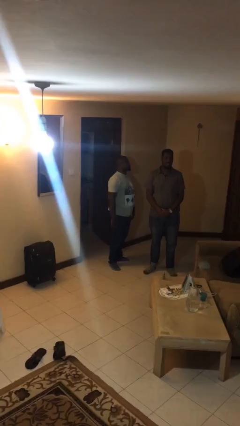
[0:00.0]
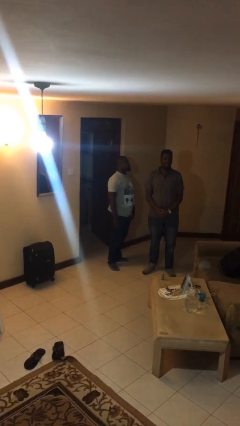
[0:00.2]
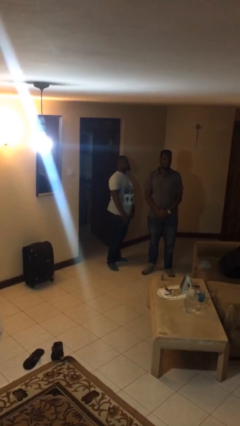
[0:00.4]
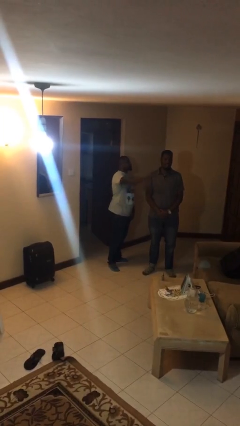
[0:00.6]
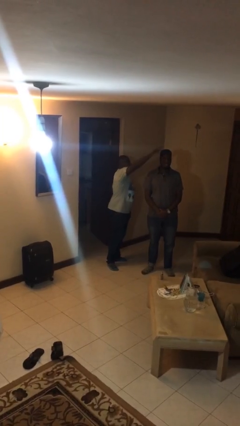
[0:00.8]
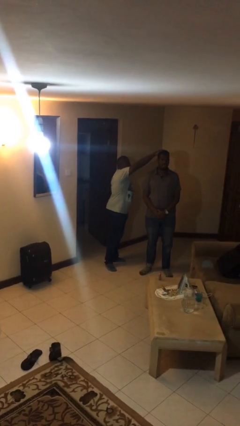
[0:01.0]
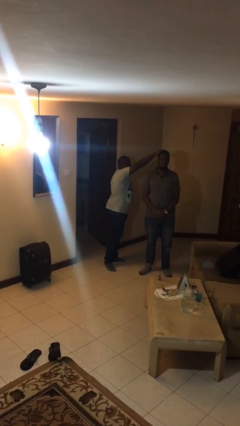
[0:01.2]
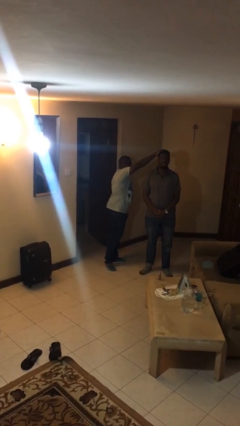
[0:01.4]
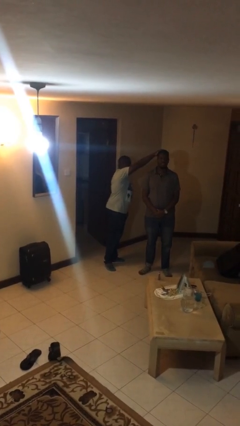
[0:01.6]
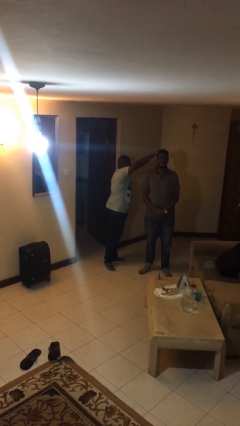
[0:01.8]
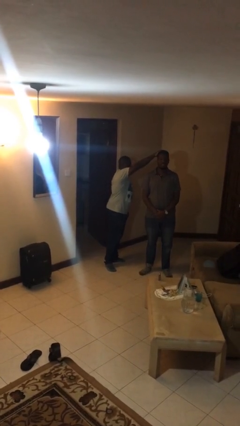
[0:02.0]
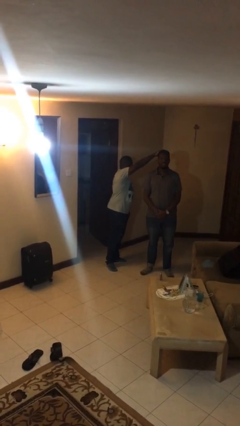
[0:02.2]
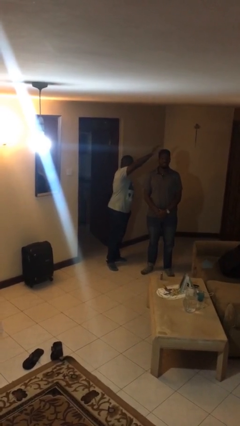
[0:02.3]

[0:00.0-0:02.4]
person grabs person by hair

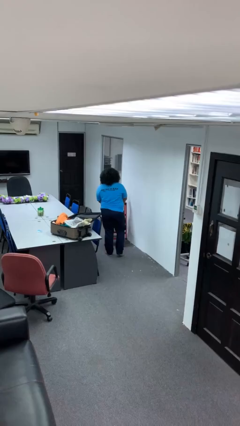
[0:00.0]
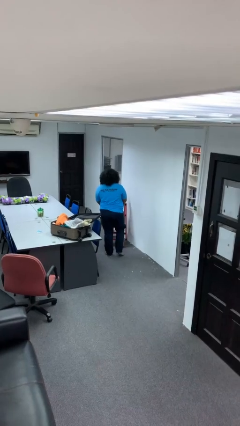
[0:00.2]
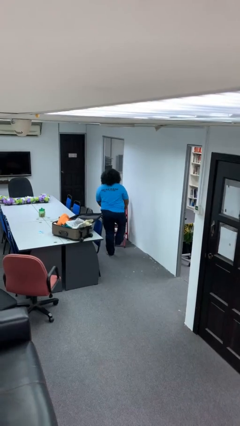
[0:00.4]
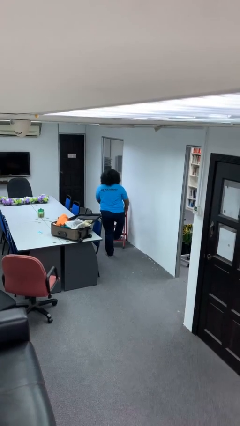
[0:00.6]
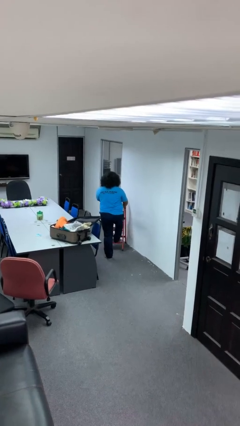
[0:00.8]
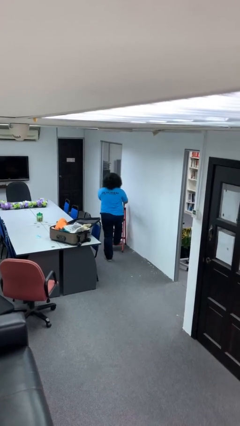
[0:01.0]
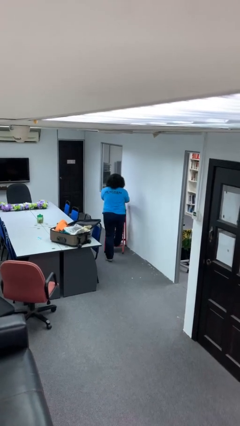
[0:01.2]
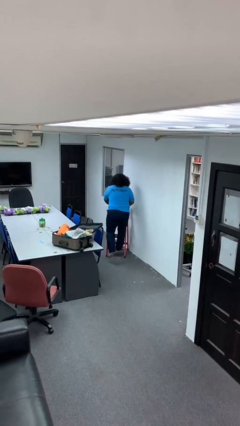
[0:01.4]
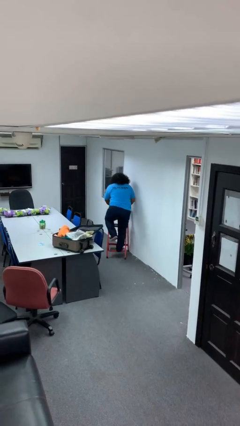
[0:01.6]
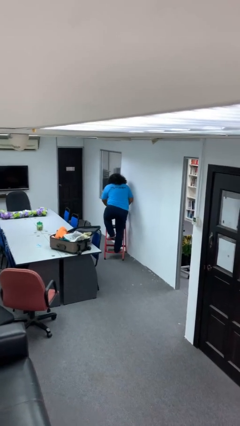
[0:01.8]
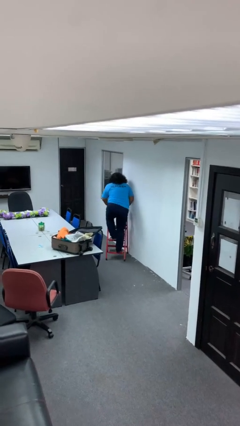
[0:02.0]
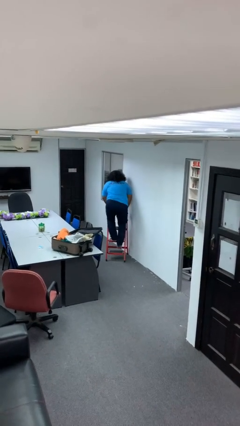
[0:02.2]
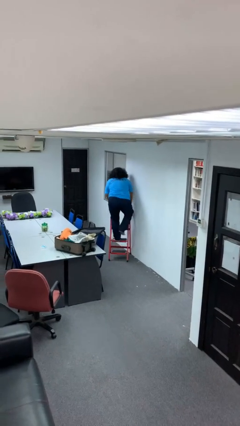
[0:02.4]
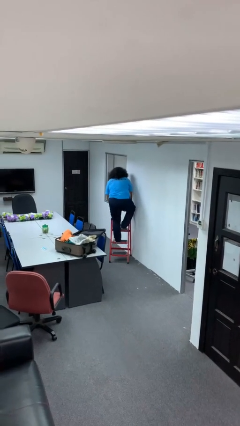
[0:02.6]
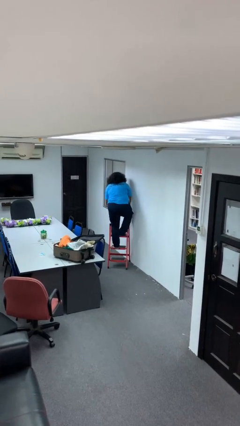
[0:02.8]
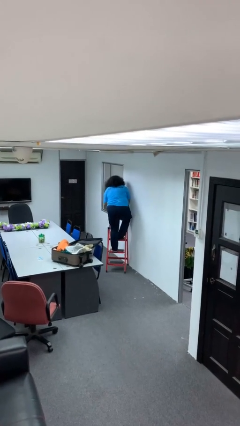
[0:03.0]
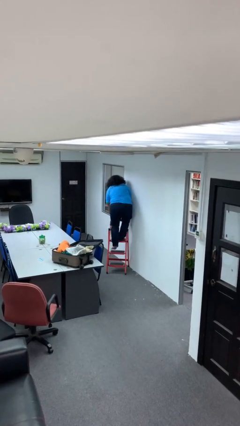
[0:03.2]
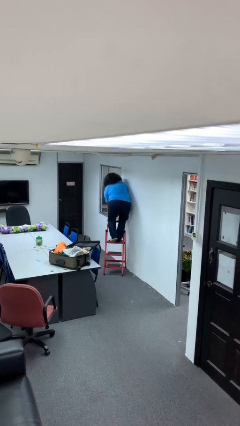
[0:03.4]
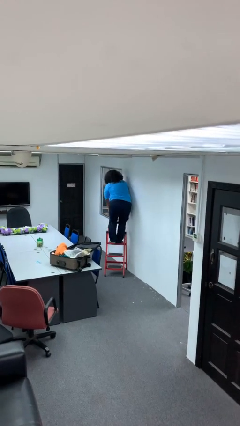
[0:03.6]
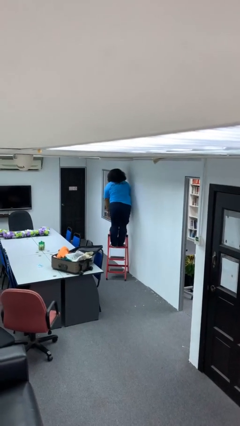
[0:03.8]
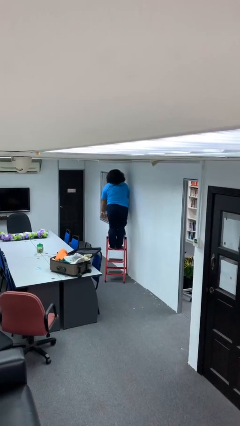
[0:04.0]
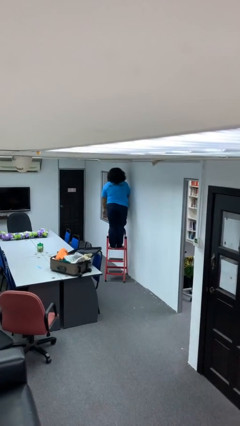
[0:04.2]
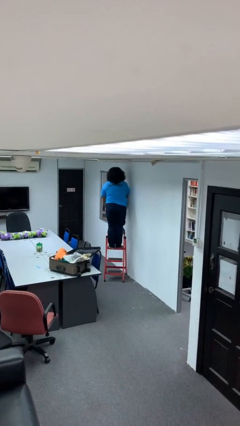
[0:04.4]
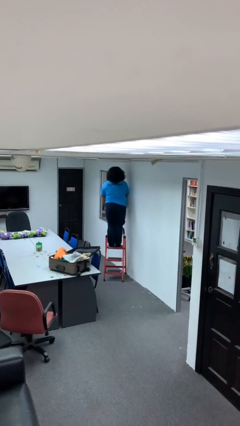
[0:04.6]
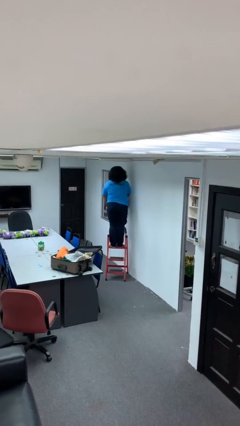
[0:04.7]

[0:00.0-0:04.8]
person climbs up ladder

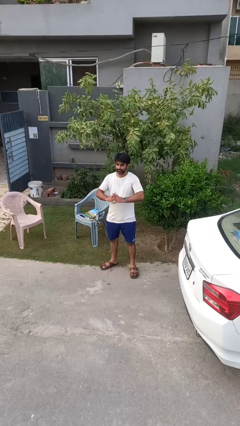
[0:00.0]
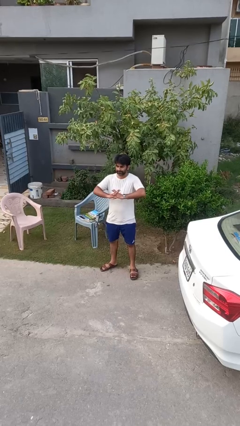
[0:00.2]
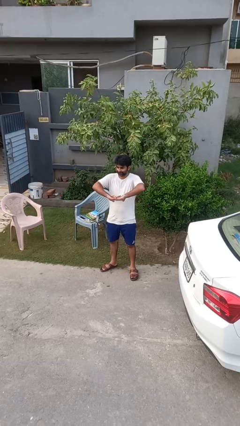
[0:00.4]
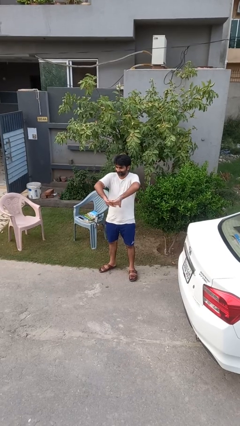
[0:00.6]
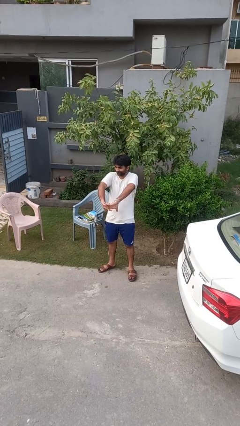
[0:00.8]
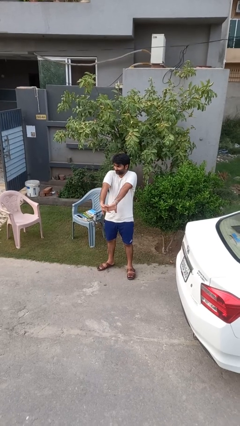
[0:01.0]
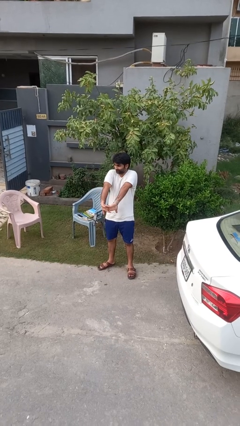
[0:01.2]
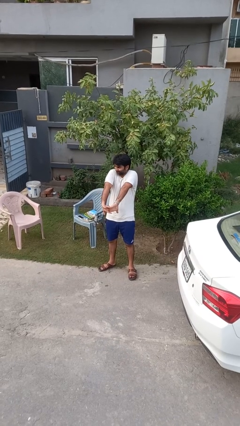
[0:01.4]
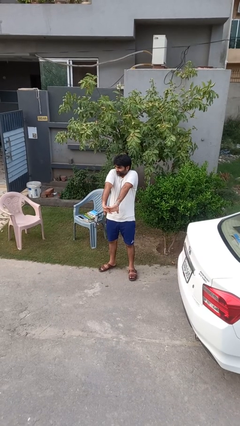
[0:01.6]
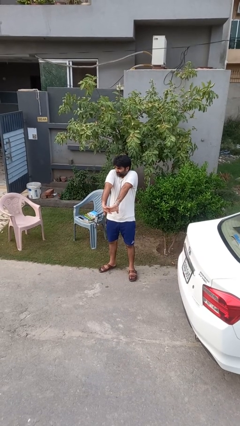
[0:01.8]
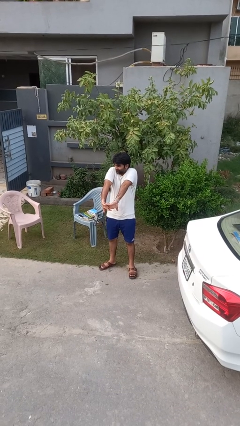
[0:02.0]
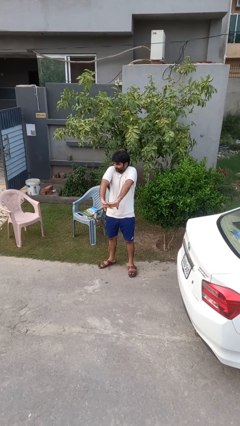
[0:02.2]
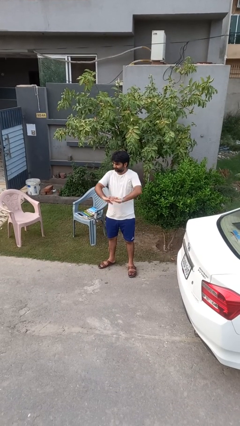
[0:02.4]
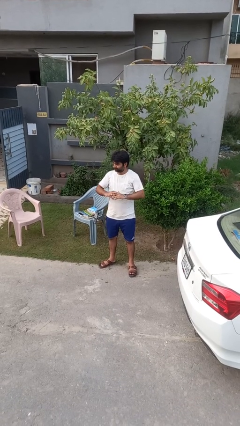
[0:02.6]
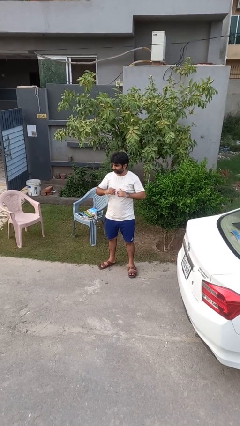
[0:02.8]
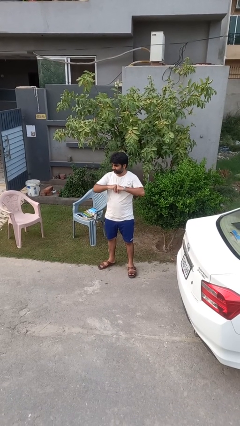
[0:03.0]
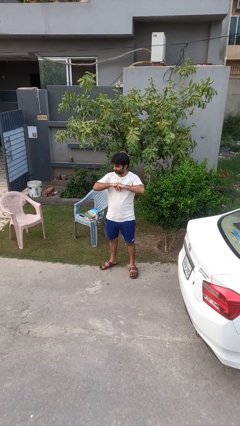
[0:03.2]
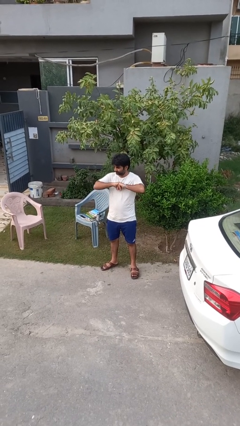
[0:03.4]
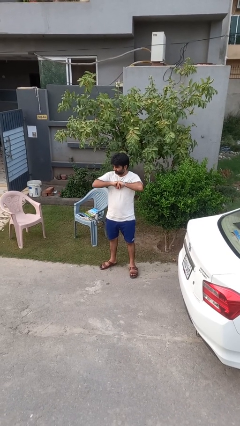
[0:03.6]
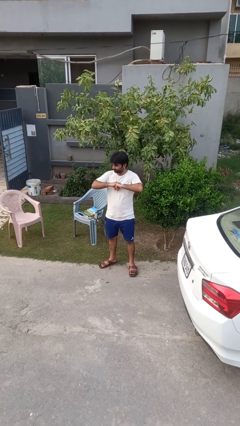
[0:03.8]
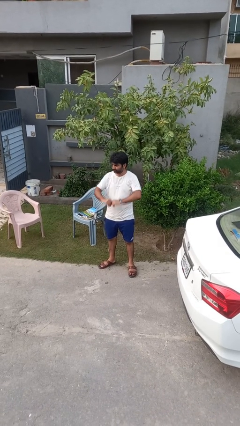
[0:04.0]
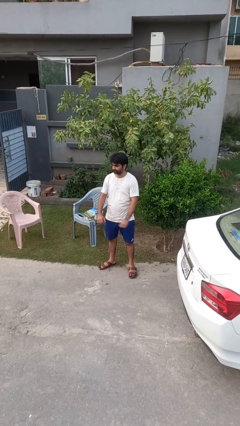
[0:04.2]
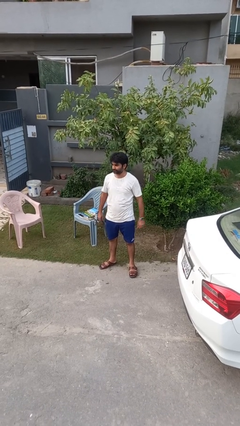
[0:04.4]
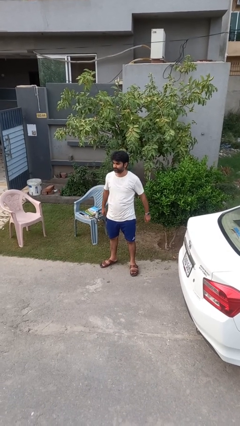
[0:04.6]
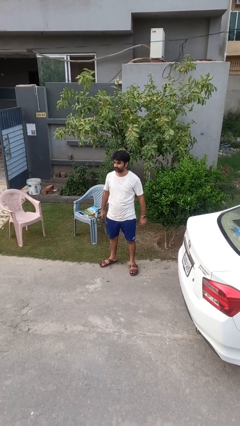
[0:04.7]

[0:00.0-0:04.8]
person cracks knuckles

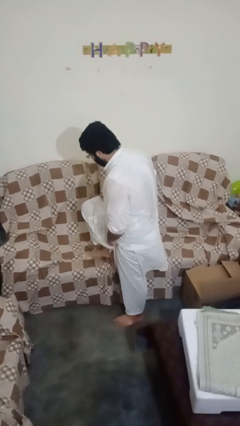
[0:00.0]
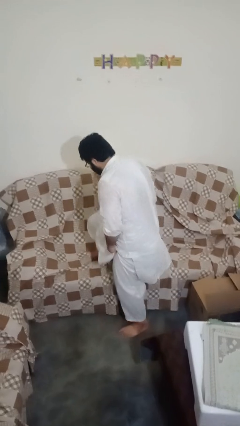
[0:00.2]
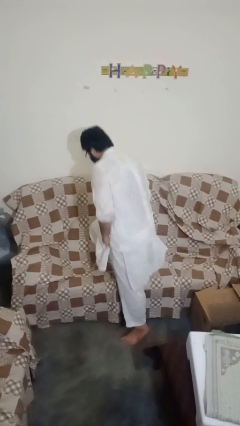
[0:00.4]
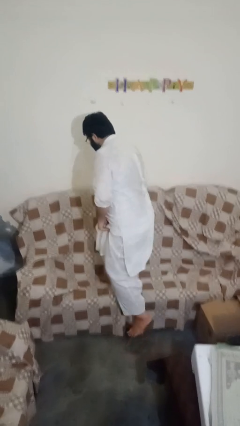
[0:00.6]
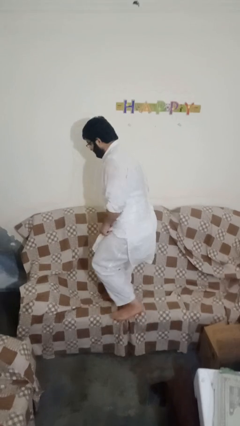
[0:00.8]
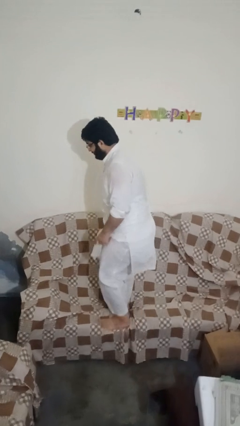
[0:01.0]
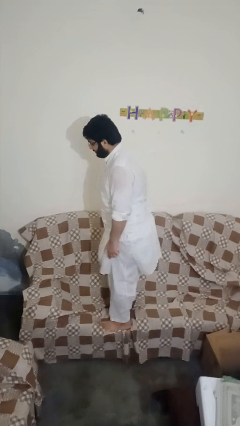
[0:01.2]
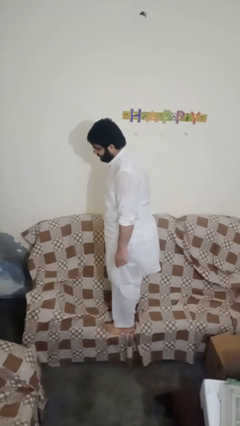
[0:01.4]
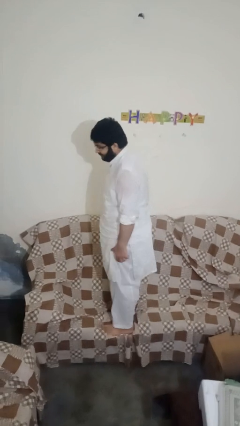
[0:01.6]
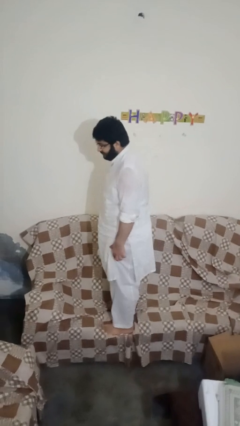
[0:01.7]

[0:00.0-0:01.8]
person climbs on couch

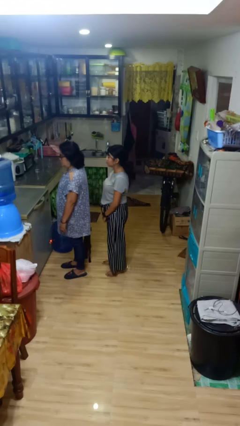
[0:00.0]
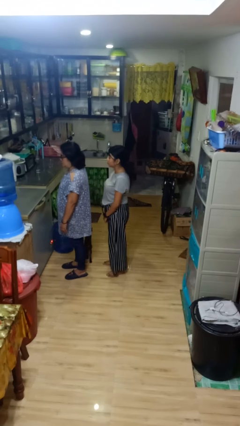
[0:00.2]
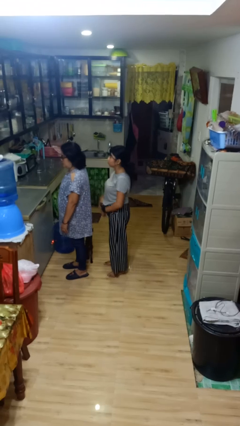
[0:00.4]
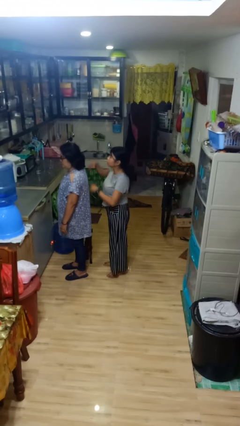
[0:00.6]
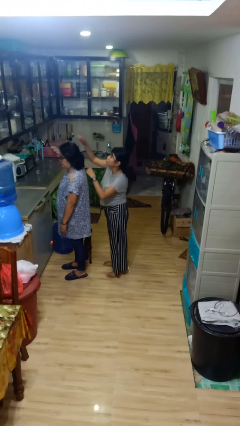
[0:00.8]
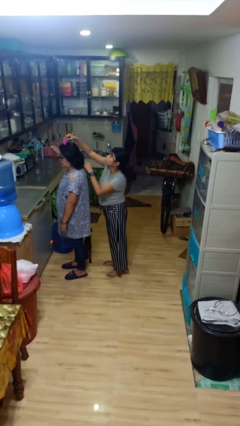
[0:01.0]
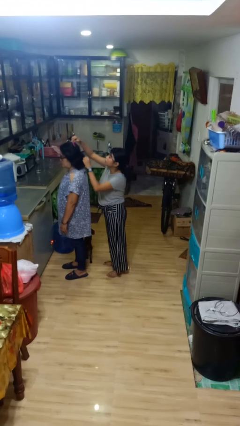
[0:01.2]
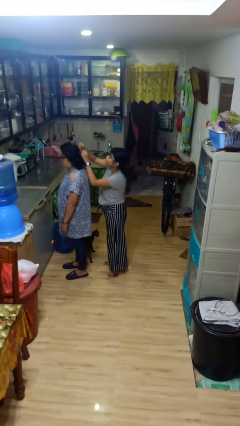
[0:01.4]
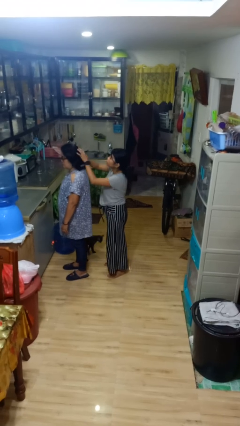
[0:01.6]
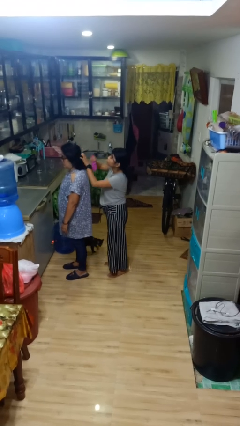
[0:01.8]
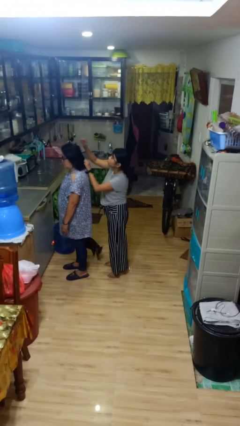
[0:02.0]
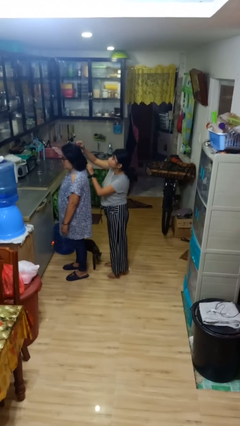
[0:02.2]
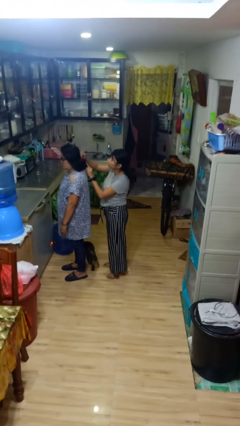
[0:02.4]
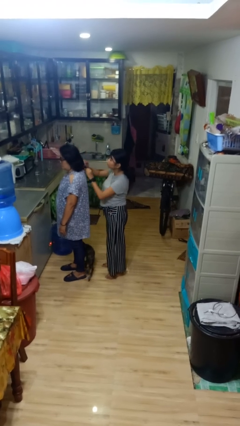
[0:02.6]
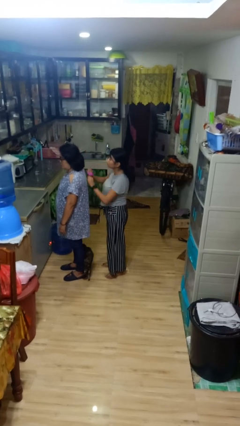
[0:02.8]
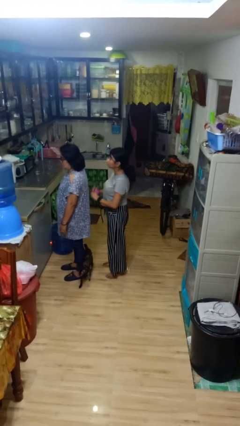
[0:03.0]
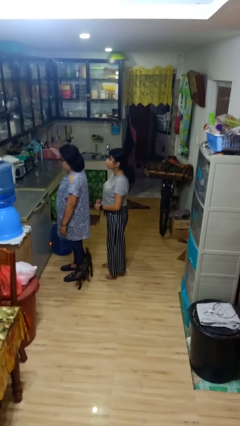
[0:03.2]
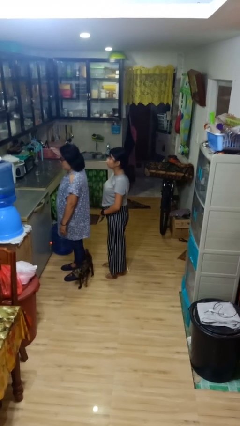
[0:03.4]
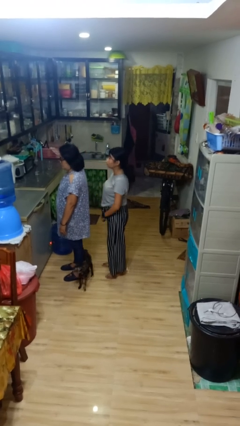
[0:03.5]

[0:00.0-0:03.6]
person brushes hair of person
